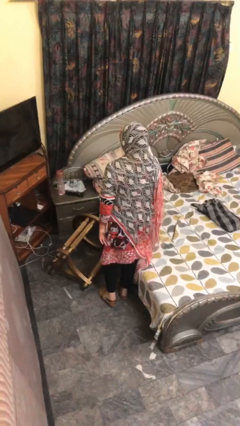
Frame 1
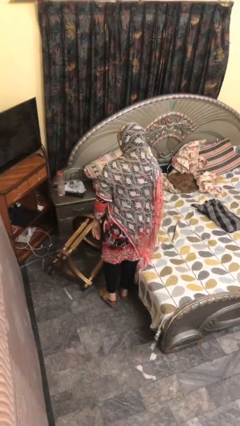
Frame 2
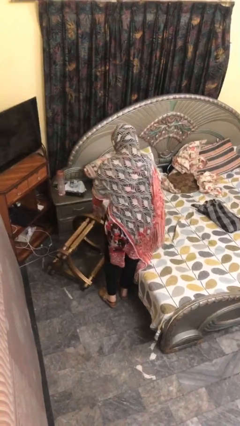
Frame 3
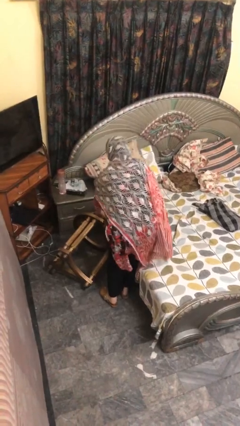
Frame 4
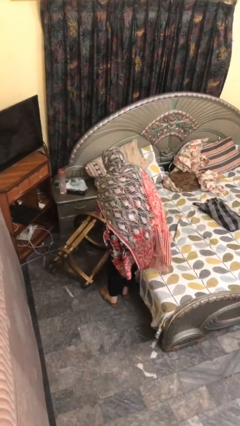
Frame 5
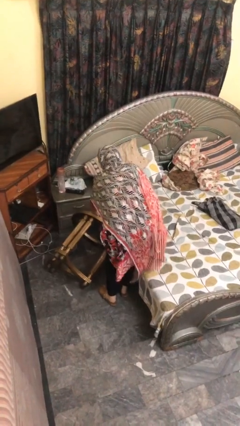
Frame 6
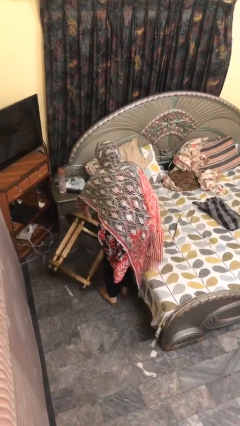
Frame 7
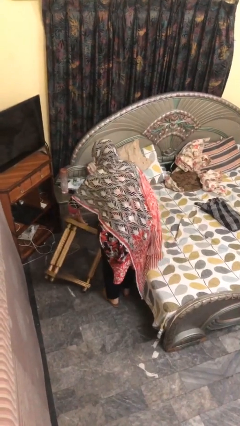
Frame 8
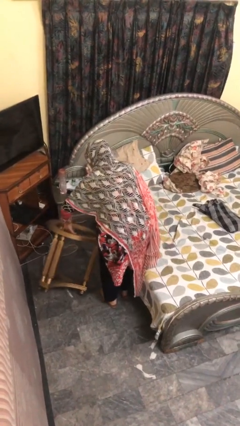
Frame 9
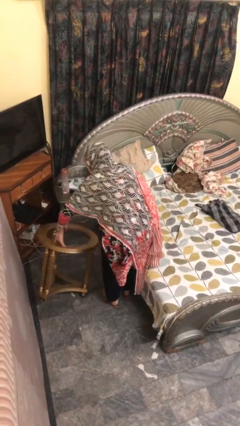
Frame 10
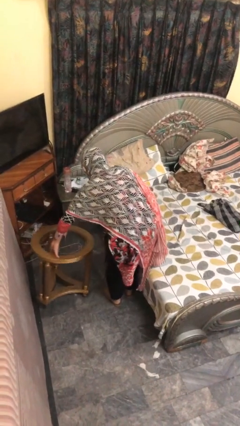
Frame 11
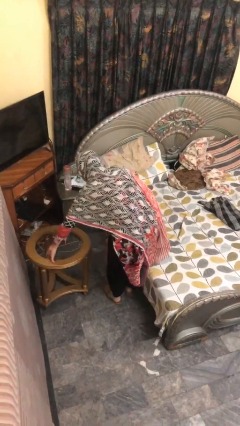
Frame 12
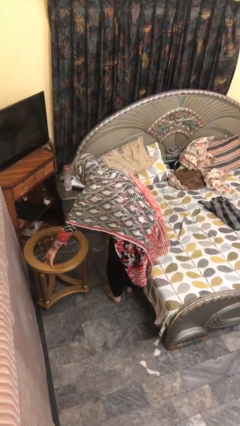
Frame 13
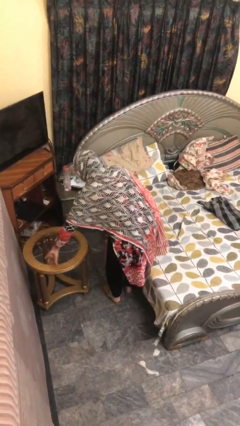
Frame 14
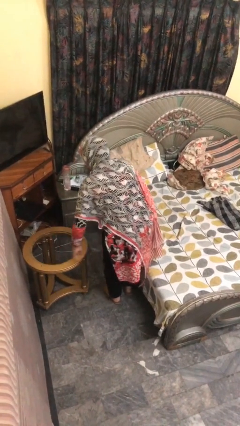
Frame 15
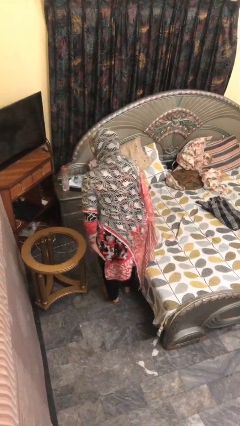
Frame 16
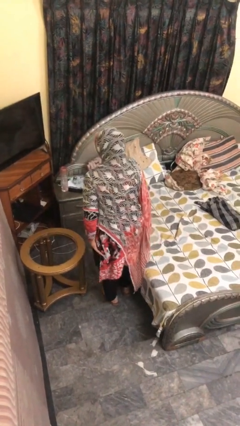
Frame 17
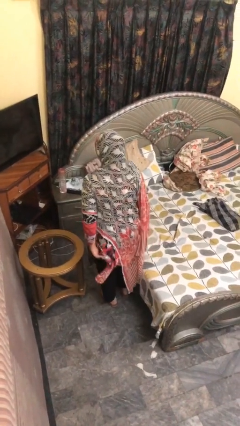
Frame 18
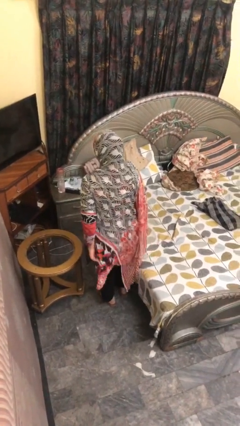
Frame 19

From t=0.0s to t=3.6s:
person sets upright furniture

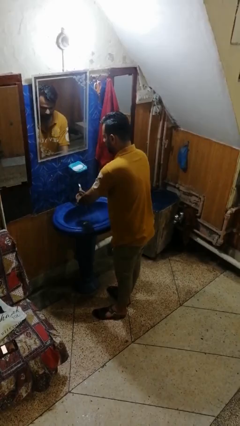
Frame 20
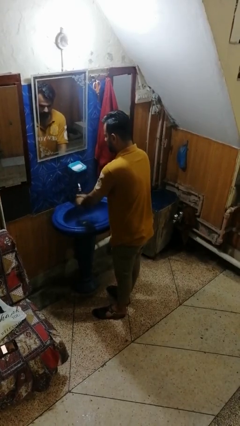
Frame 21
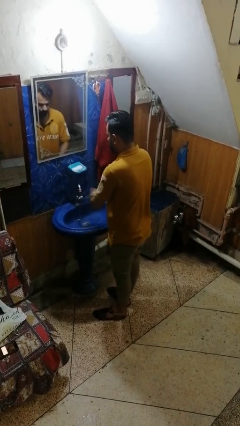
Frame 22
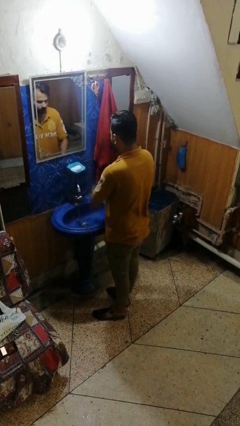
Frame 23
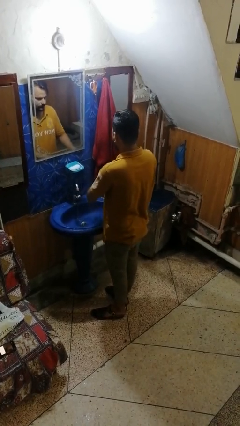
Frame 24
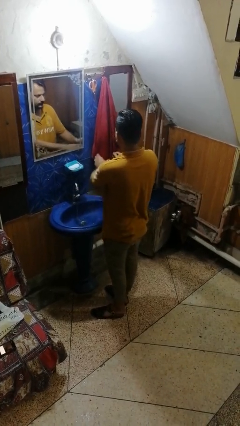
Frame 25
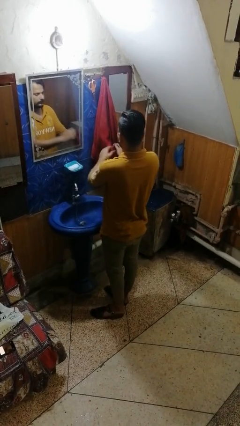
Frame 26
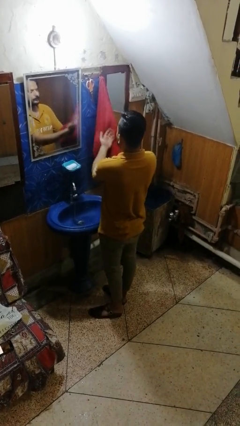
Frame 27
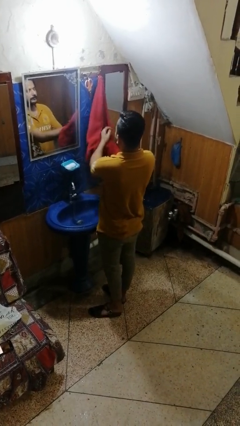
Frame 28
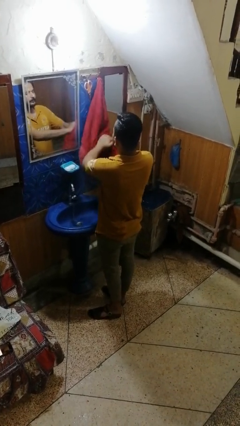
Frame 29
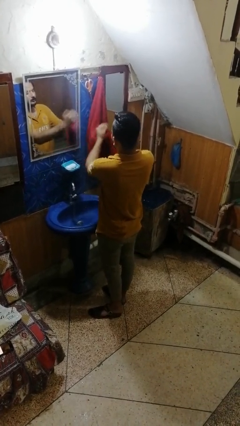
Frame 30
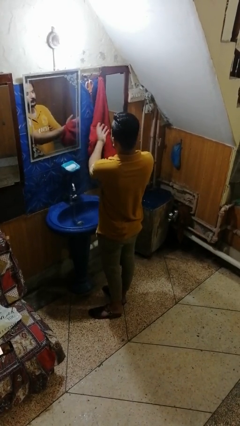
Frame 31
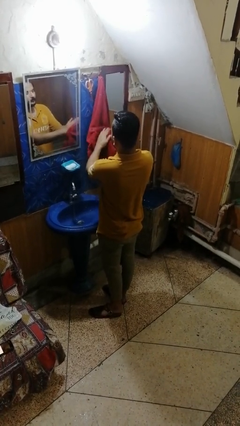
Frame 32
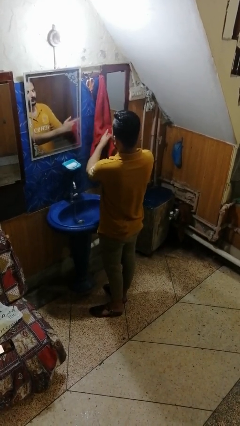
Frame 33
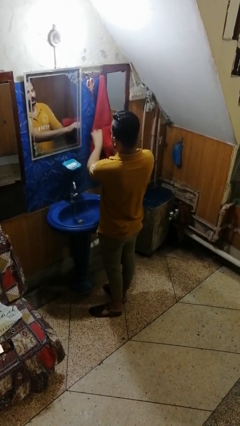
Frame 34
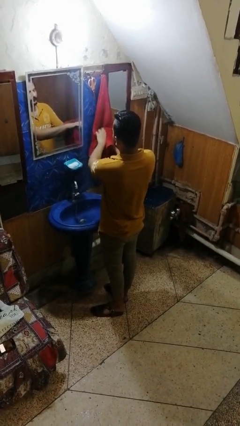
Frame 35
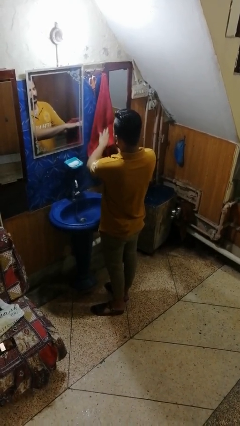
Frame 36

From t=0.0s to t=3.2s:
person dries hands with towel

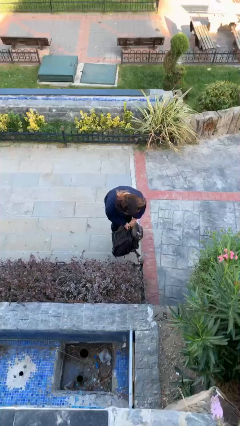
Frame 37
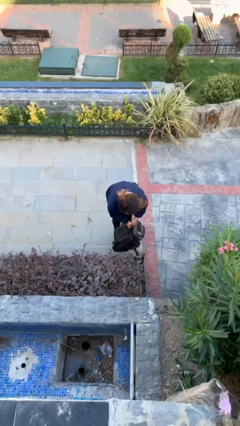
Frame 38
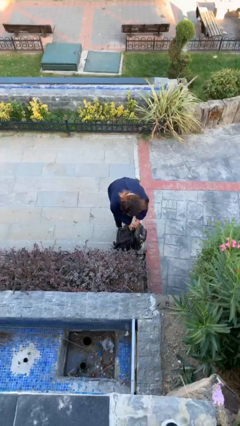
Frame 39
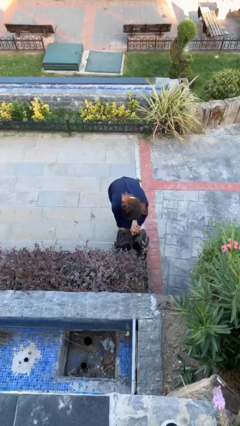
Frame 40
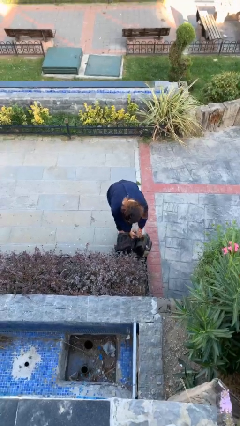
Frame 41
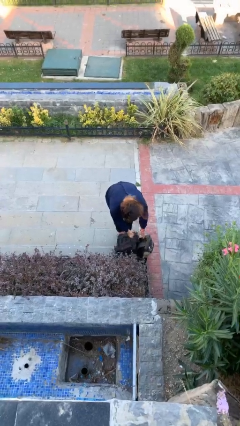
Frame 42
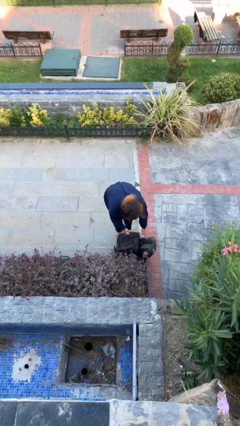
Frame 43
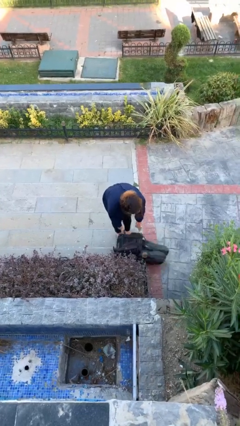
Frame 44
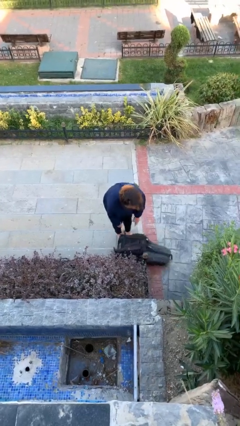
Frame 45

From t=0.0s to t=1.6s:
person puts down object on floor

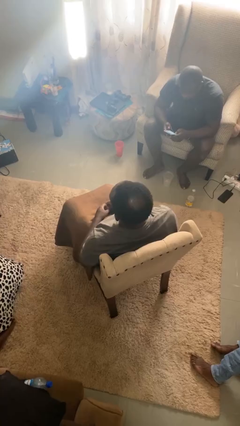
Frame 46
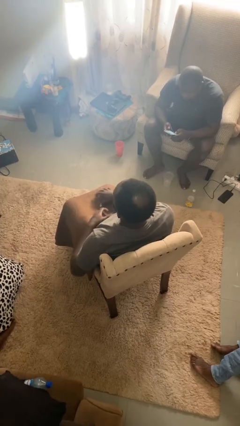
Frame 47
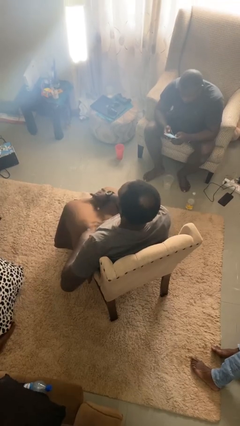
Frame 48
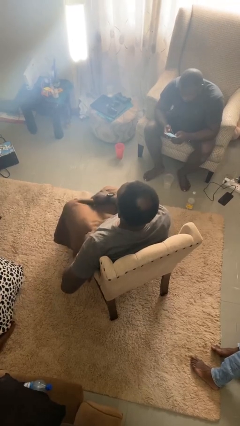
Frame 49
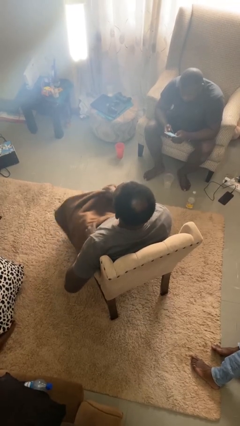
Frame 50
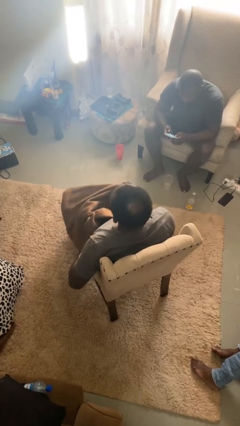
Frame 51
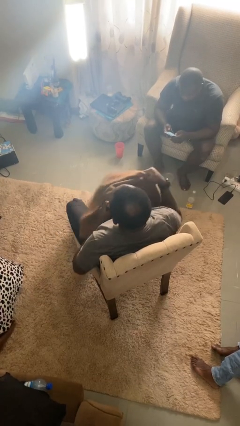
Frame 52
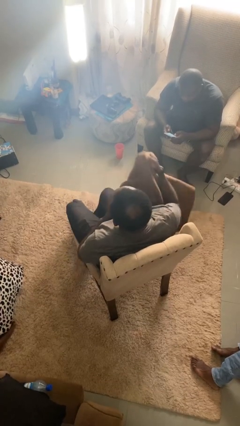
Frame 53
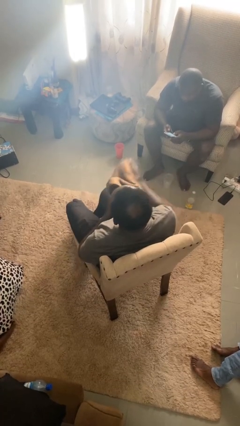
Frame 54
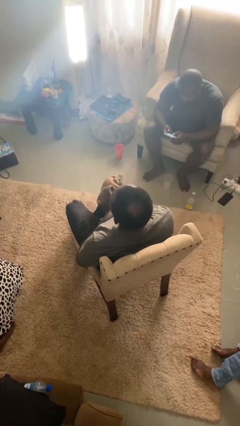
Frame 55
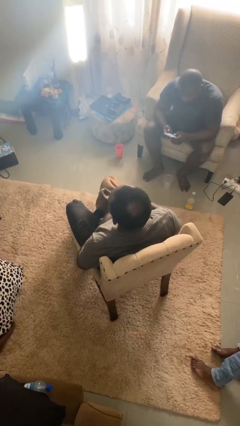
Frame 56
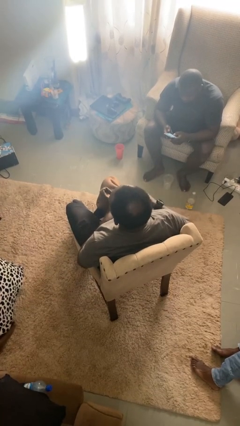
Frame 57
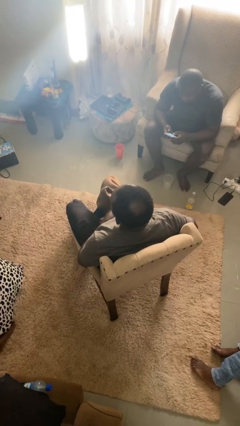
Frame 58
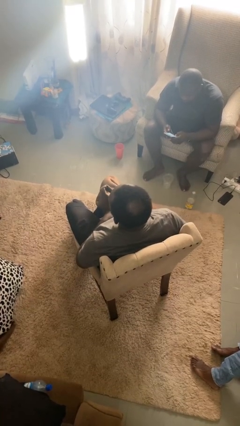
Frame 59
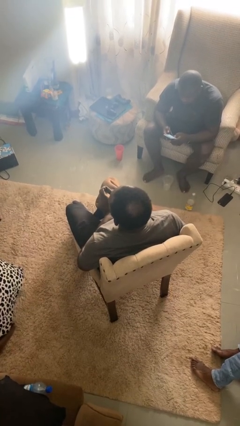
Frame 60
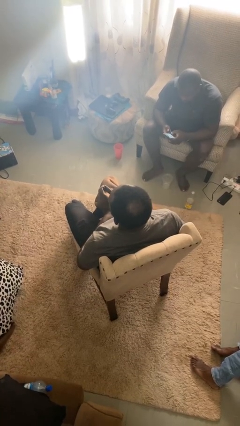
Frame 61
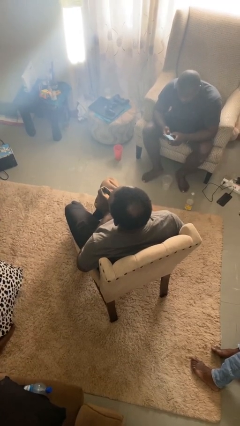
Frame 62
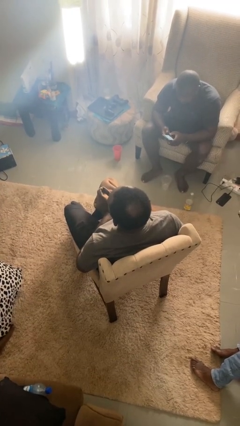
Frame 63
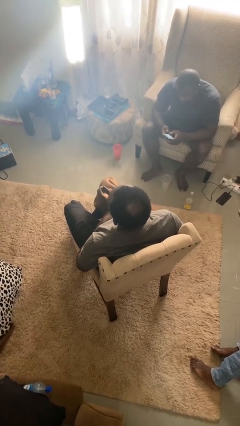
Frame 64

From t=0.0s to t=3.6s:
person uncovers with blanket

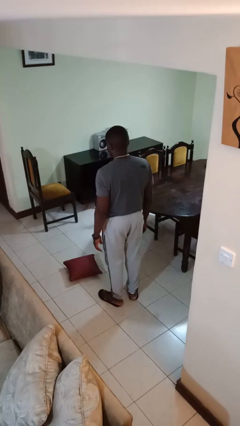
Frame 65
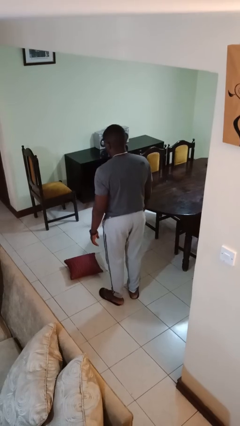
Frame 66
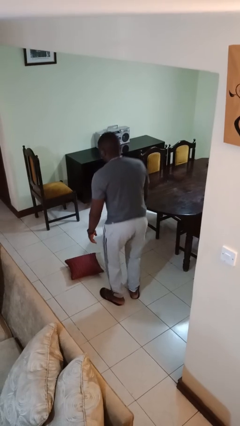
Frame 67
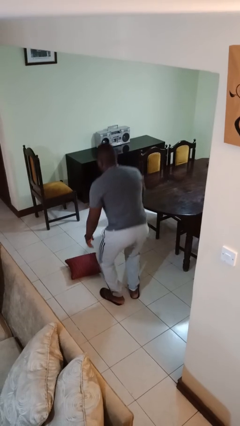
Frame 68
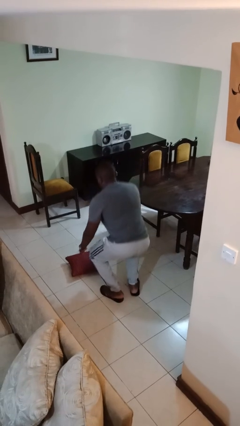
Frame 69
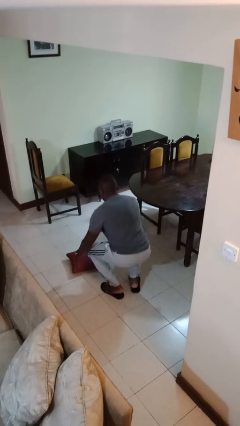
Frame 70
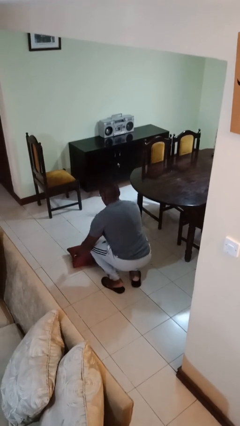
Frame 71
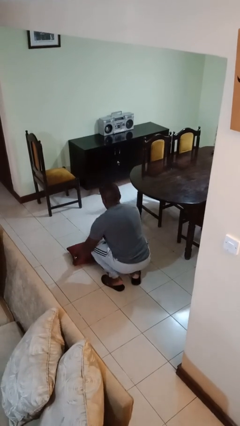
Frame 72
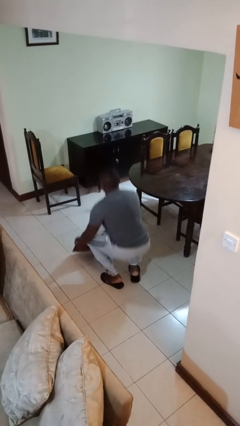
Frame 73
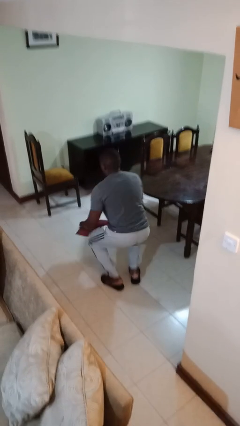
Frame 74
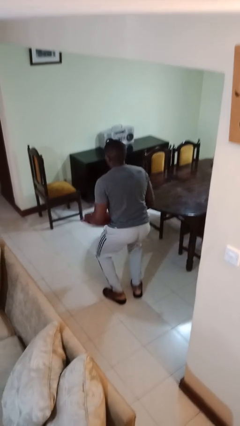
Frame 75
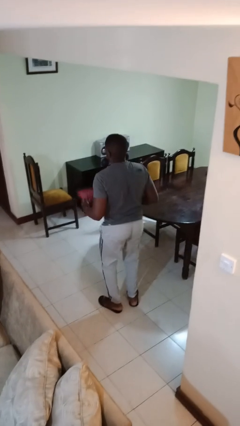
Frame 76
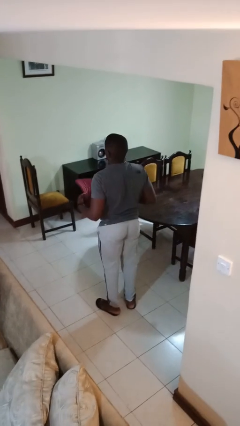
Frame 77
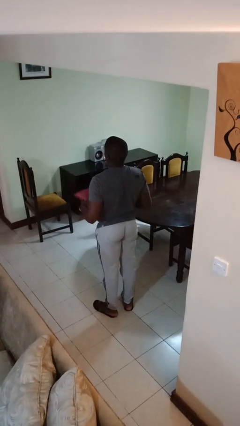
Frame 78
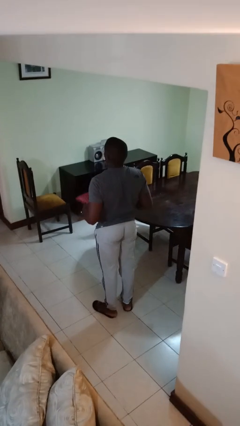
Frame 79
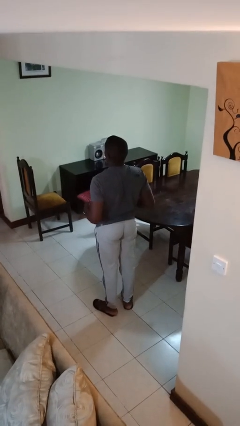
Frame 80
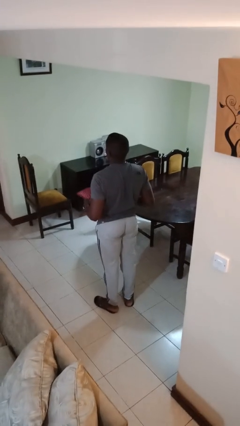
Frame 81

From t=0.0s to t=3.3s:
person picks up object from floor

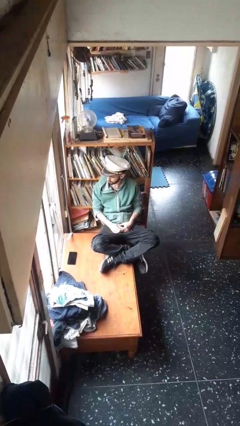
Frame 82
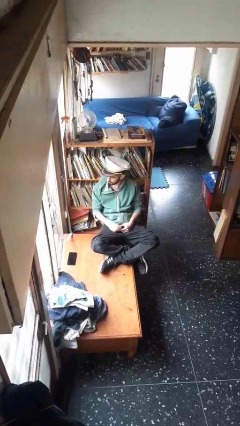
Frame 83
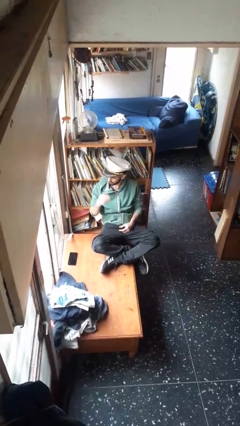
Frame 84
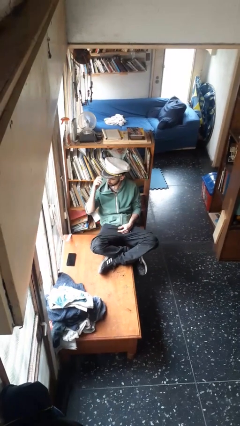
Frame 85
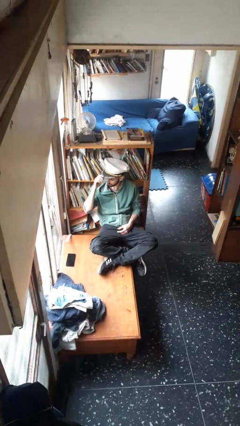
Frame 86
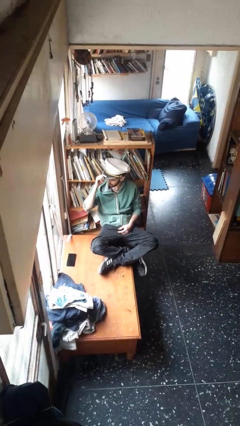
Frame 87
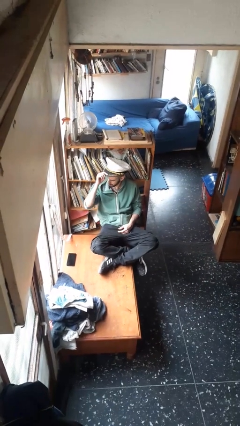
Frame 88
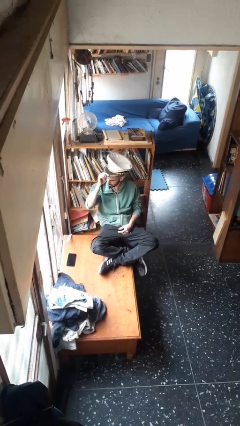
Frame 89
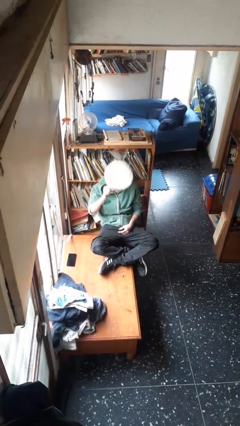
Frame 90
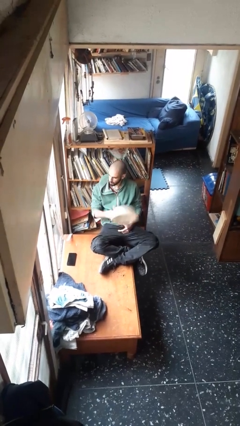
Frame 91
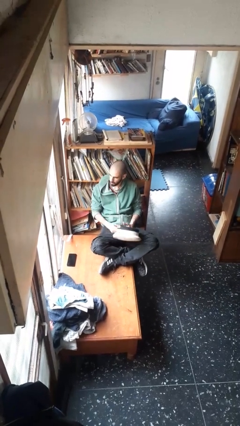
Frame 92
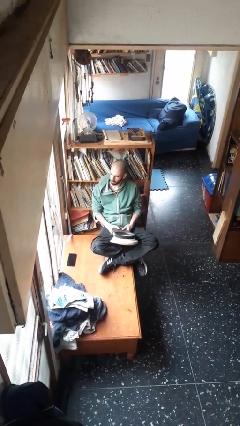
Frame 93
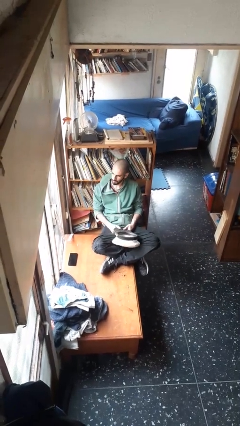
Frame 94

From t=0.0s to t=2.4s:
person takes off hat
